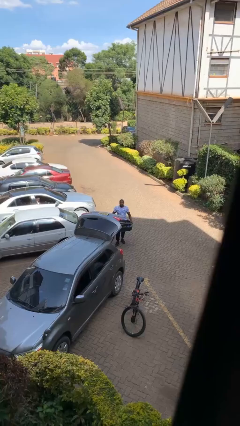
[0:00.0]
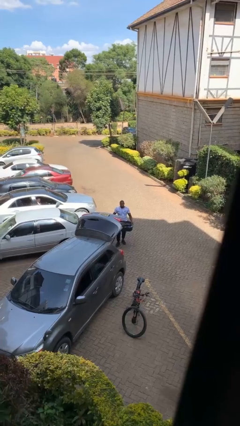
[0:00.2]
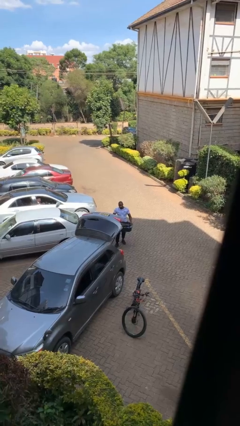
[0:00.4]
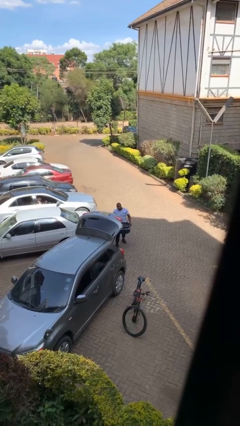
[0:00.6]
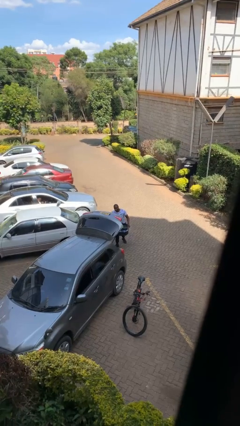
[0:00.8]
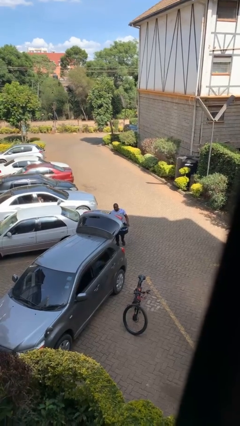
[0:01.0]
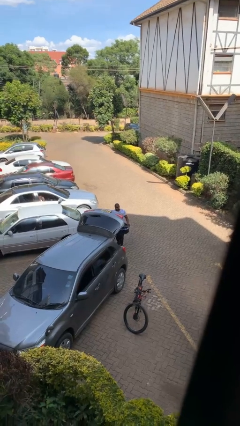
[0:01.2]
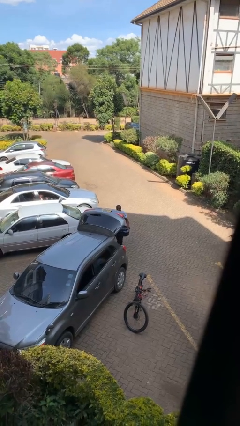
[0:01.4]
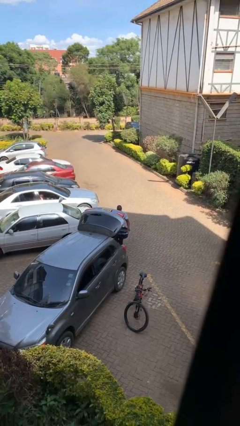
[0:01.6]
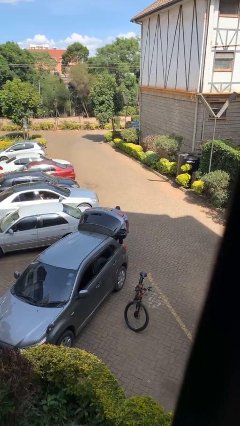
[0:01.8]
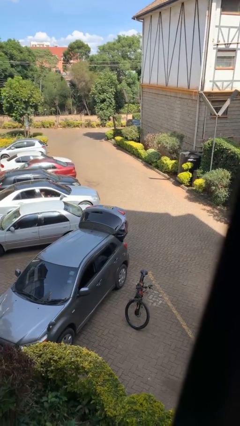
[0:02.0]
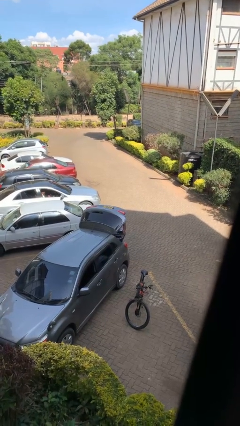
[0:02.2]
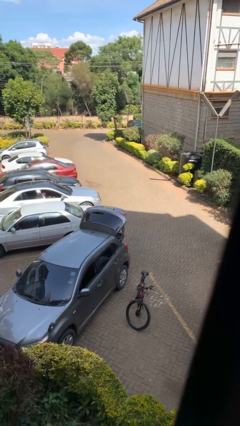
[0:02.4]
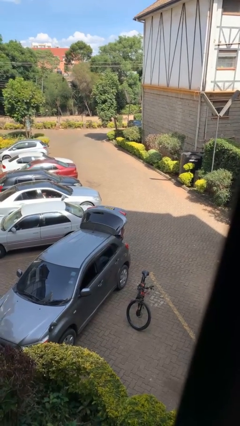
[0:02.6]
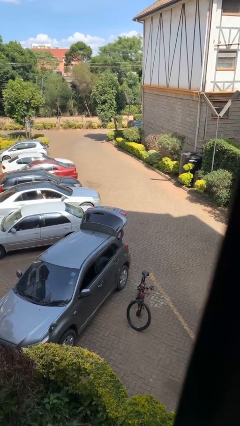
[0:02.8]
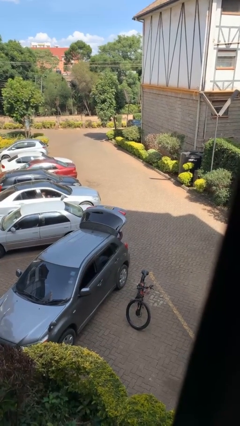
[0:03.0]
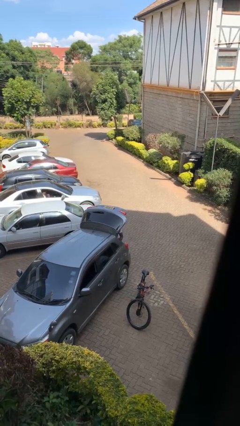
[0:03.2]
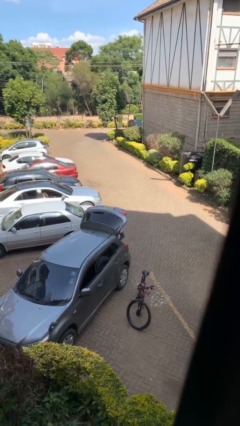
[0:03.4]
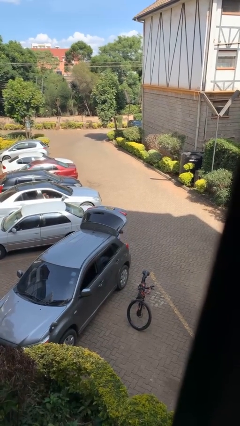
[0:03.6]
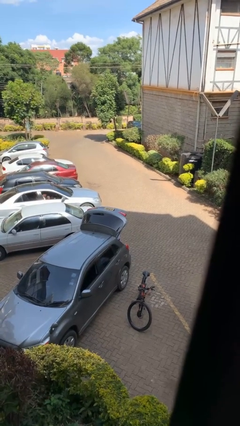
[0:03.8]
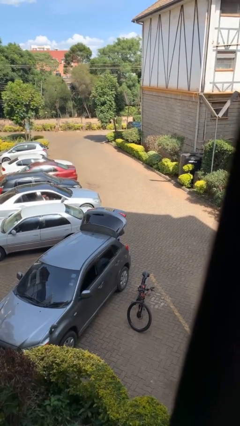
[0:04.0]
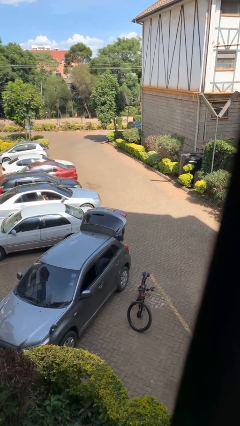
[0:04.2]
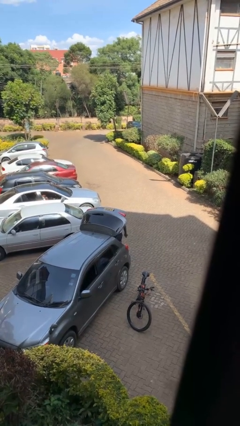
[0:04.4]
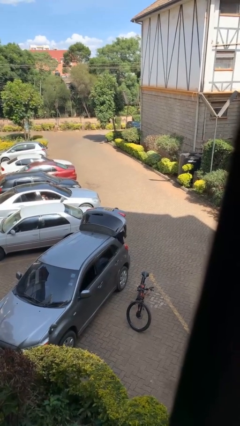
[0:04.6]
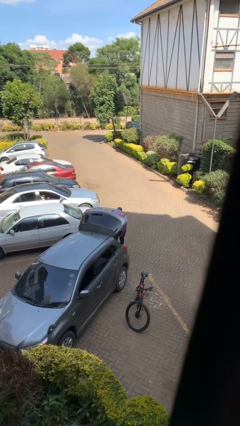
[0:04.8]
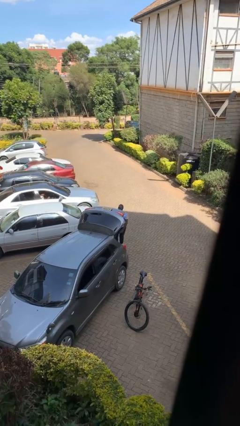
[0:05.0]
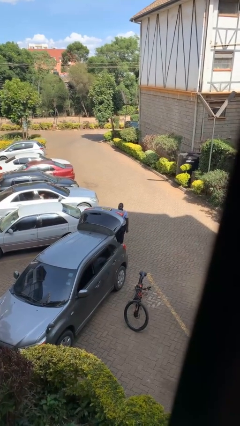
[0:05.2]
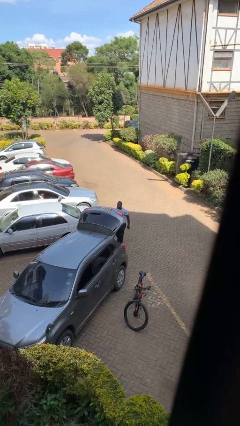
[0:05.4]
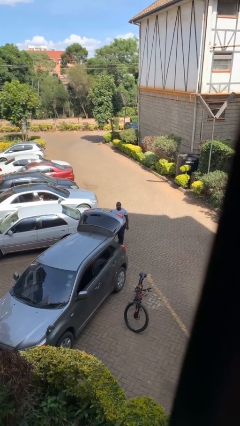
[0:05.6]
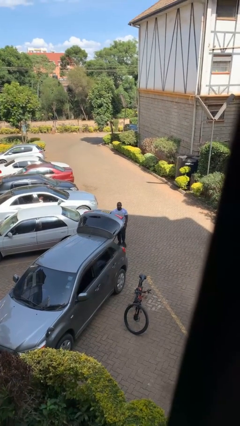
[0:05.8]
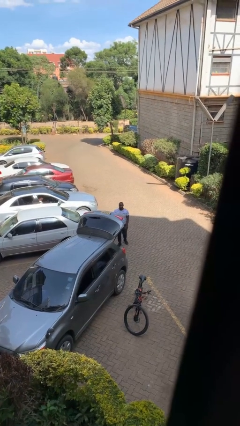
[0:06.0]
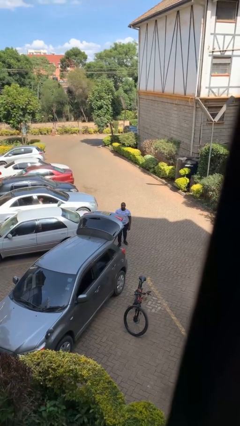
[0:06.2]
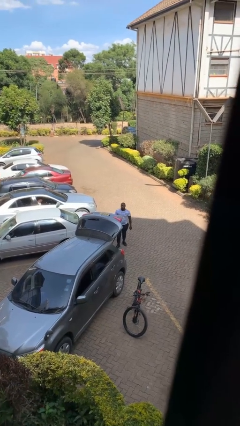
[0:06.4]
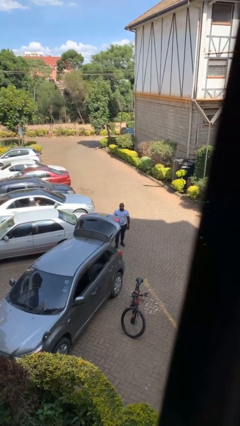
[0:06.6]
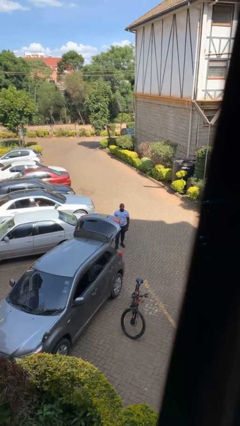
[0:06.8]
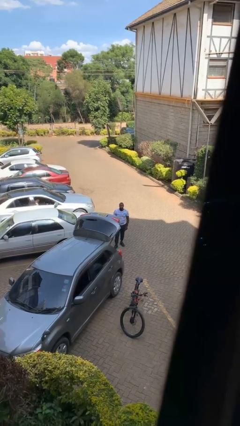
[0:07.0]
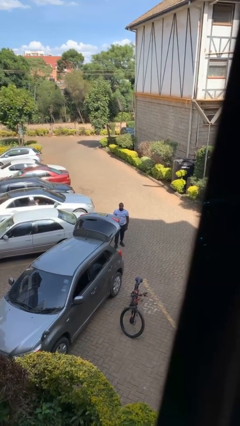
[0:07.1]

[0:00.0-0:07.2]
person loads car

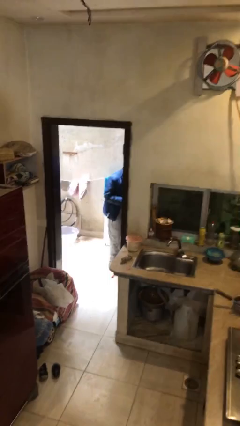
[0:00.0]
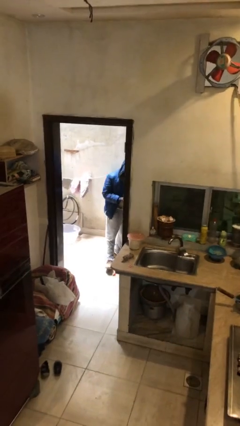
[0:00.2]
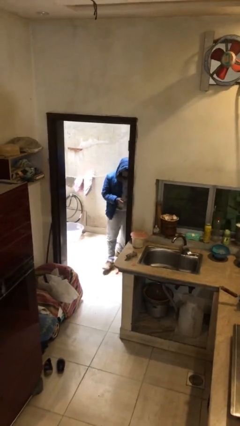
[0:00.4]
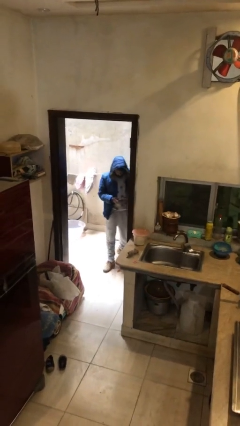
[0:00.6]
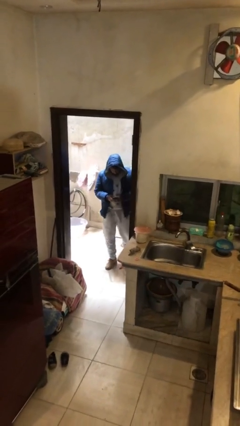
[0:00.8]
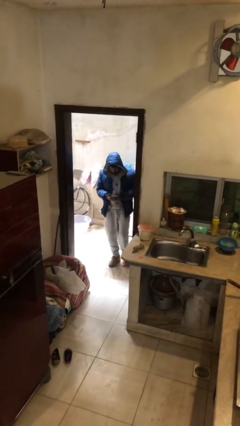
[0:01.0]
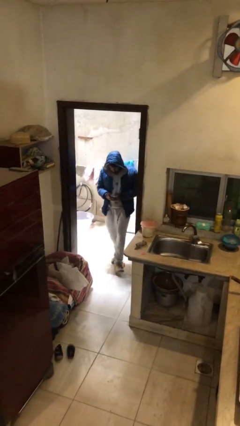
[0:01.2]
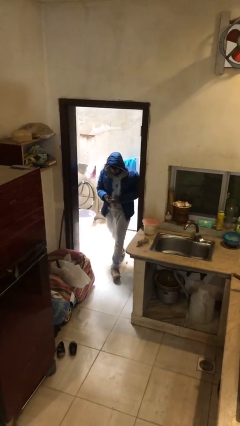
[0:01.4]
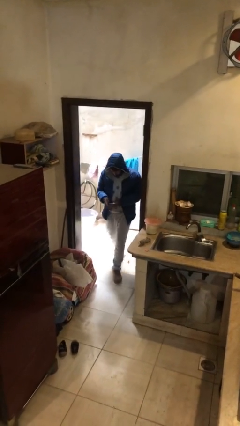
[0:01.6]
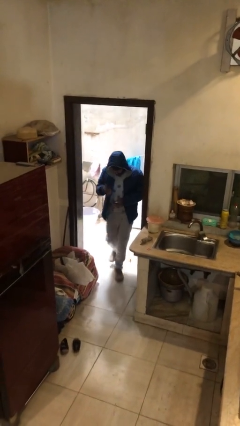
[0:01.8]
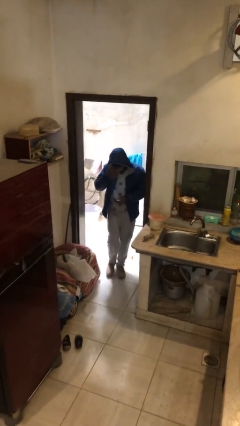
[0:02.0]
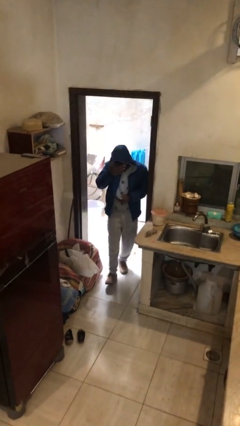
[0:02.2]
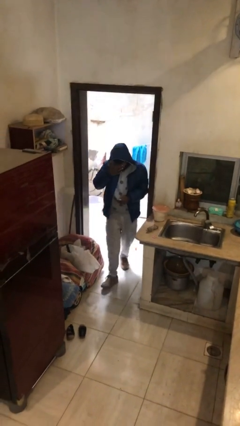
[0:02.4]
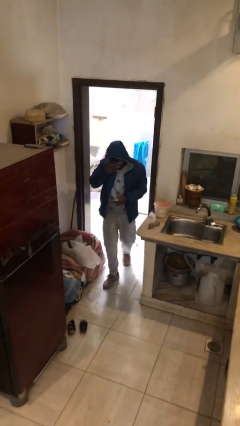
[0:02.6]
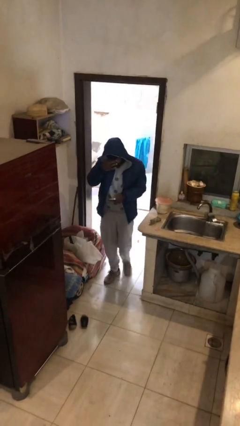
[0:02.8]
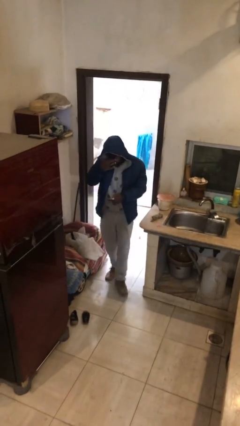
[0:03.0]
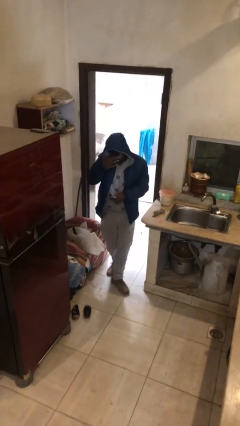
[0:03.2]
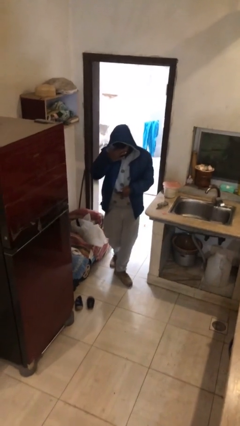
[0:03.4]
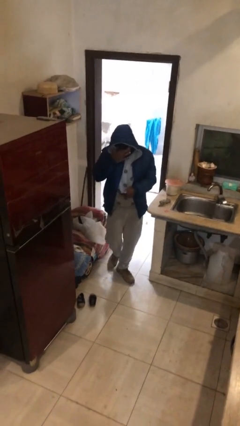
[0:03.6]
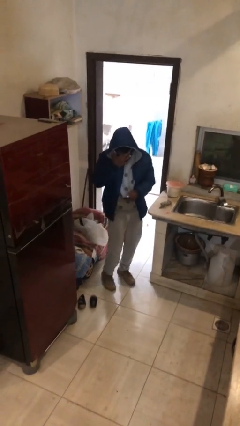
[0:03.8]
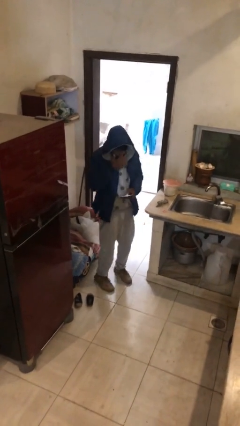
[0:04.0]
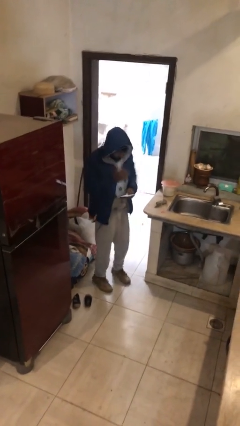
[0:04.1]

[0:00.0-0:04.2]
person enters scene through structure

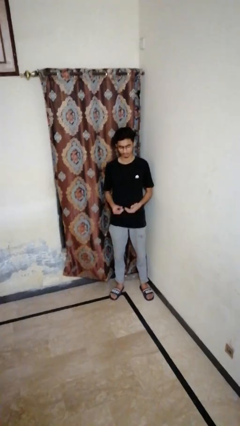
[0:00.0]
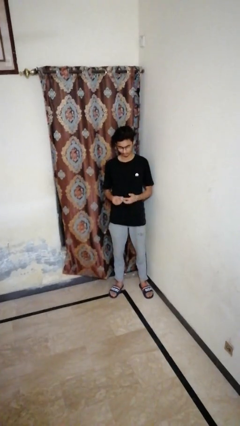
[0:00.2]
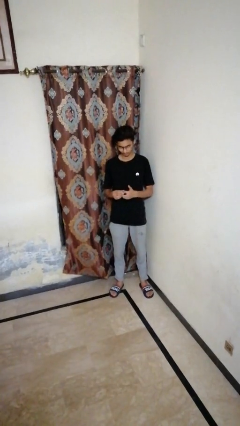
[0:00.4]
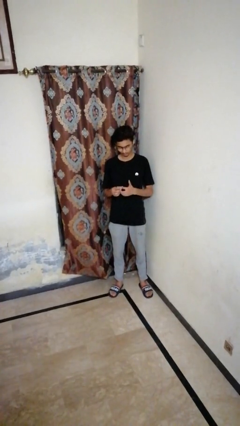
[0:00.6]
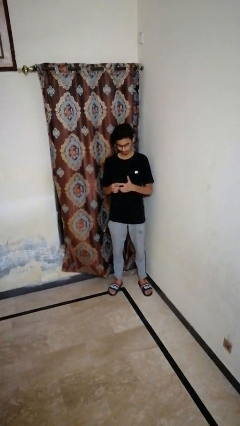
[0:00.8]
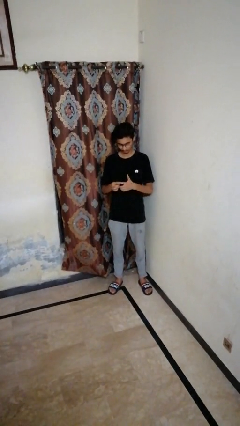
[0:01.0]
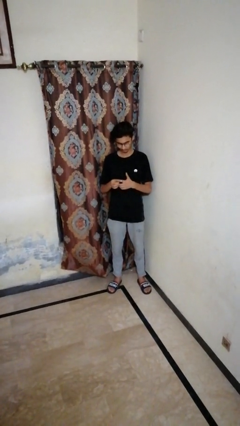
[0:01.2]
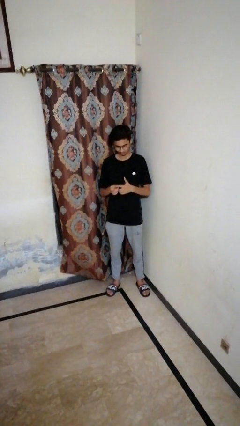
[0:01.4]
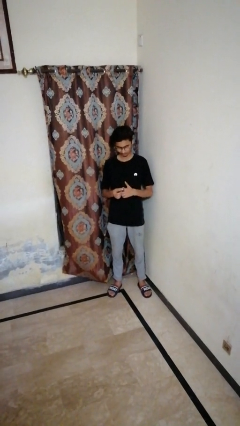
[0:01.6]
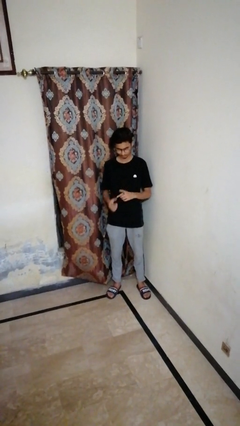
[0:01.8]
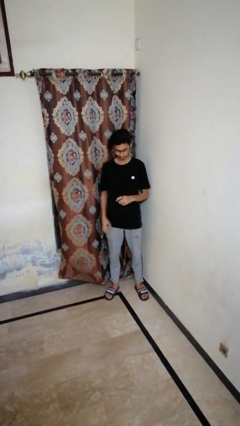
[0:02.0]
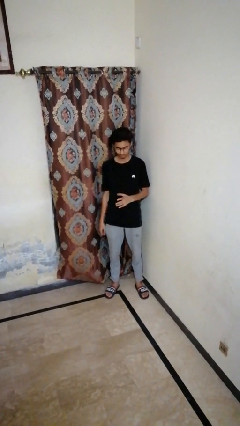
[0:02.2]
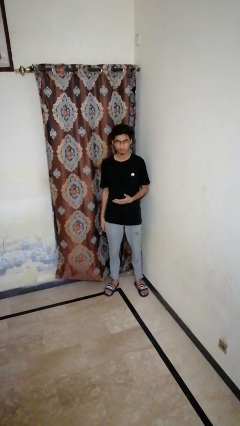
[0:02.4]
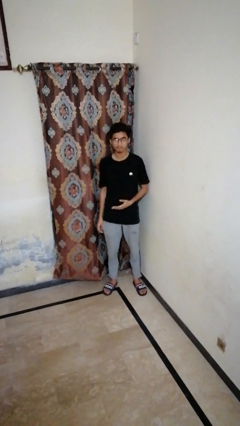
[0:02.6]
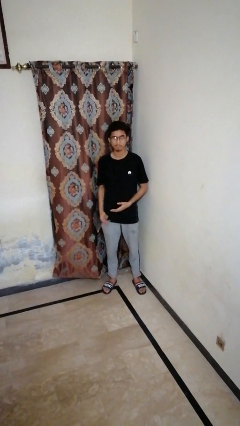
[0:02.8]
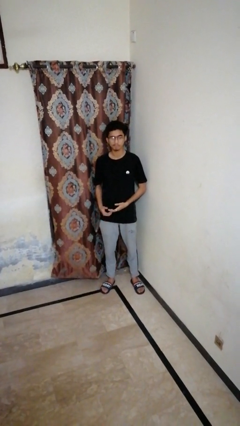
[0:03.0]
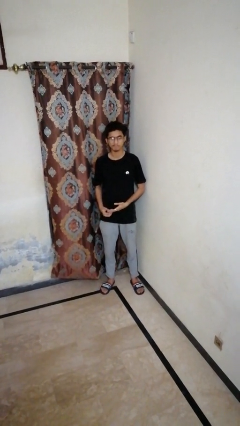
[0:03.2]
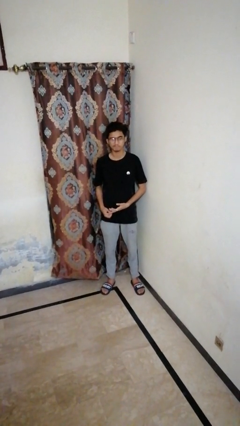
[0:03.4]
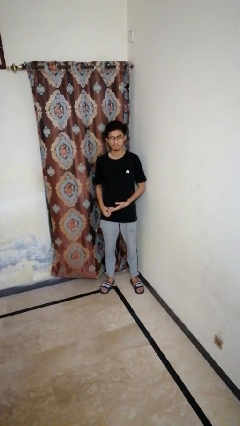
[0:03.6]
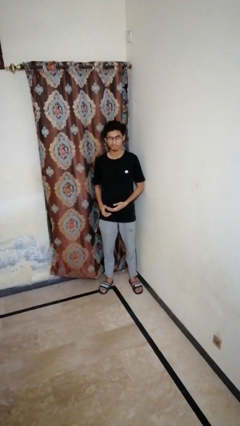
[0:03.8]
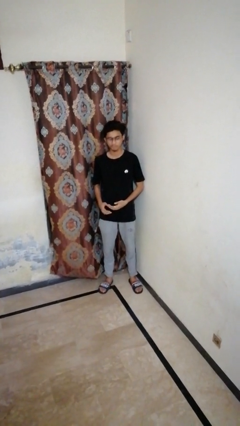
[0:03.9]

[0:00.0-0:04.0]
person puts on ring

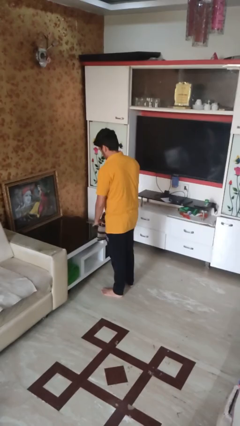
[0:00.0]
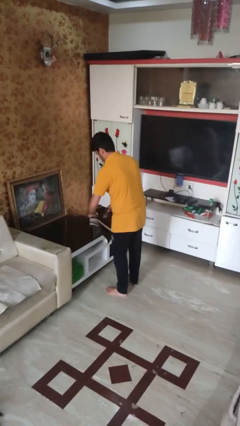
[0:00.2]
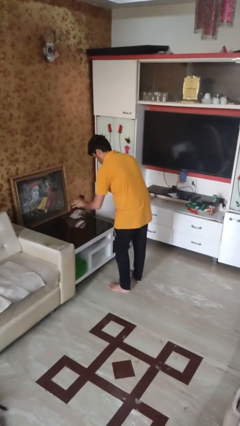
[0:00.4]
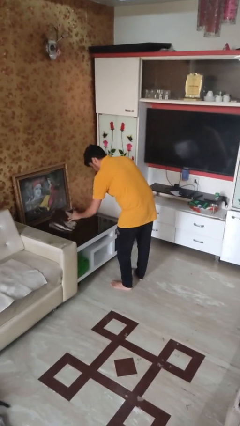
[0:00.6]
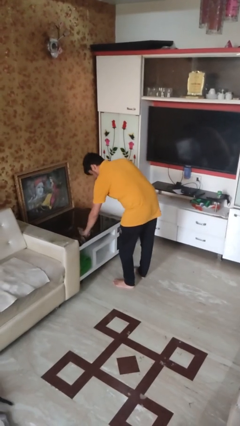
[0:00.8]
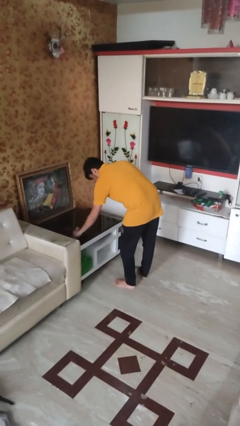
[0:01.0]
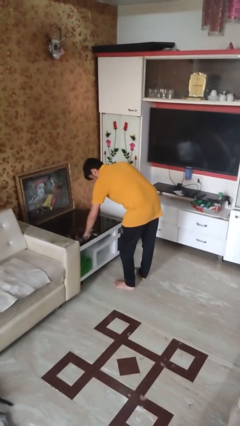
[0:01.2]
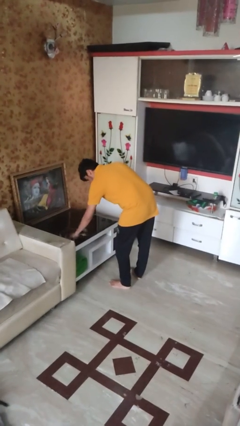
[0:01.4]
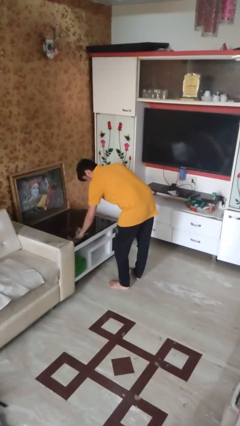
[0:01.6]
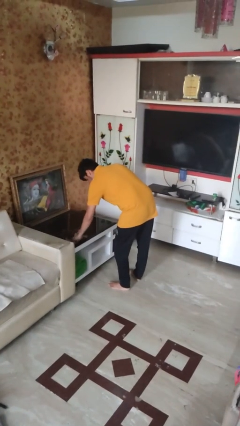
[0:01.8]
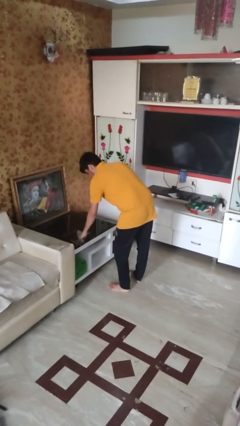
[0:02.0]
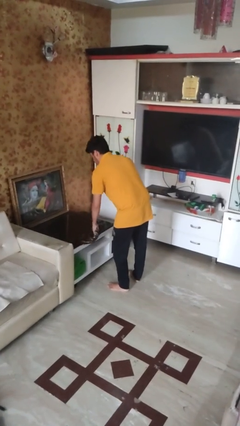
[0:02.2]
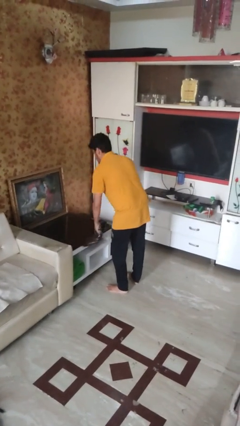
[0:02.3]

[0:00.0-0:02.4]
person cleans table with rag
